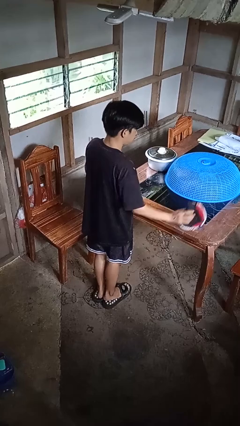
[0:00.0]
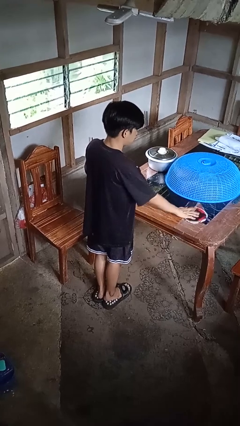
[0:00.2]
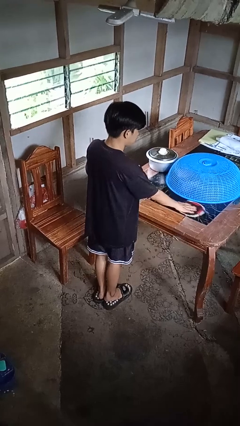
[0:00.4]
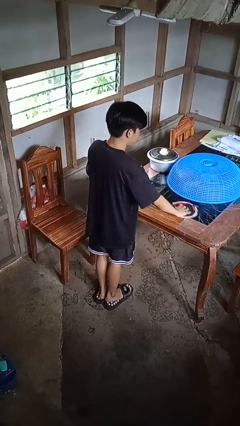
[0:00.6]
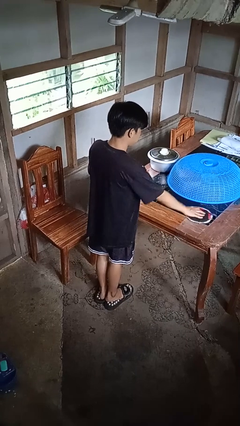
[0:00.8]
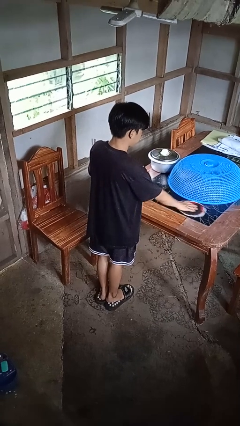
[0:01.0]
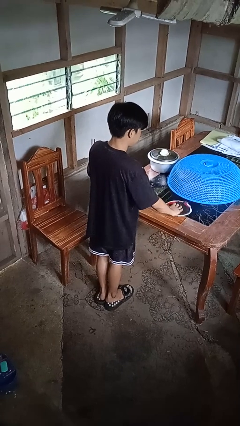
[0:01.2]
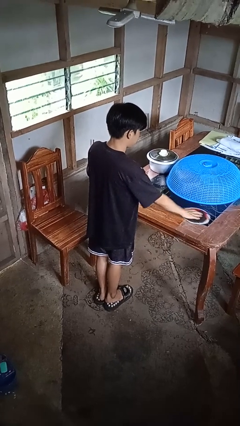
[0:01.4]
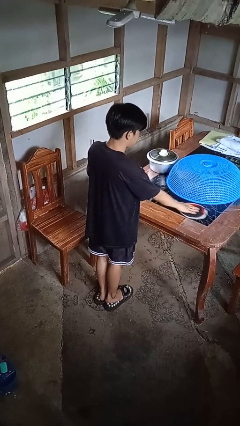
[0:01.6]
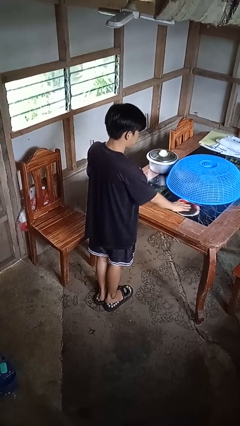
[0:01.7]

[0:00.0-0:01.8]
person cleans table with rag

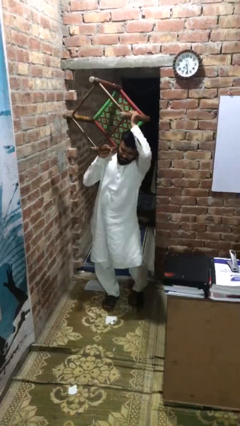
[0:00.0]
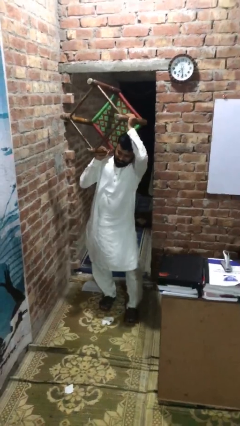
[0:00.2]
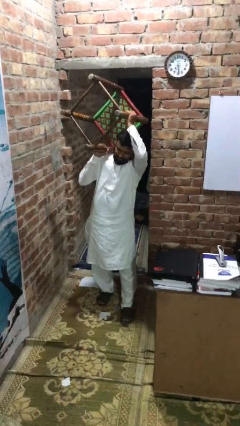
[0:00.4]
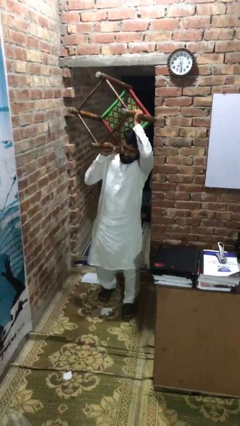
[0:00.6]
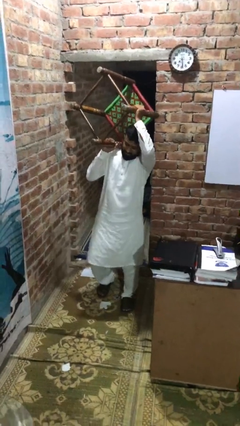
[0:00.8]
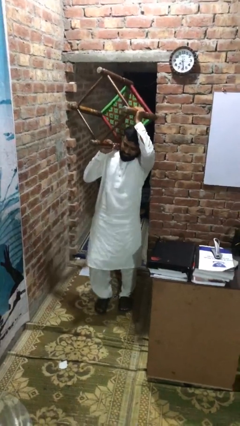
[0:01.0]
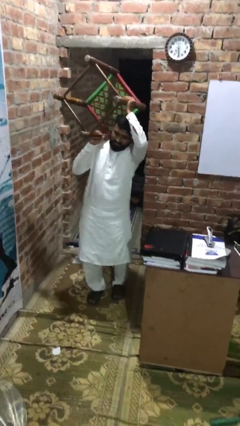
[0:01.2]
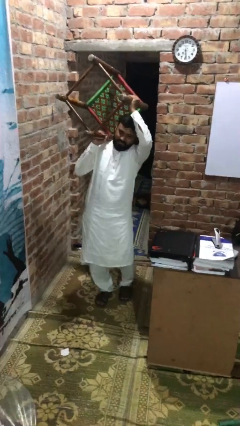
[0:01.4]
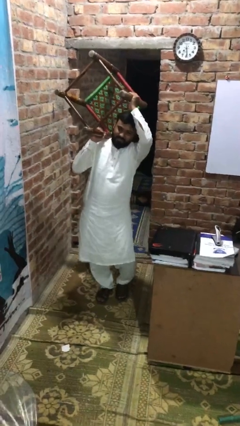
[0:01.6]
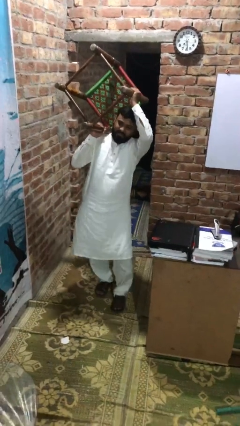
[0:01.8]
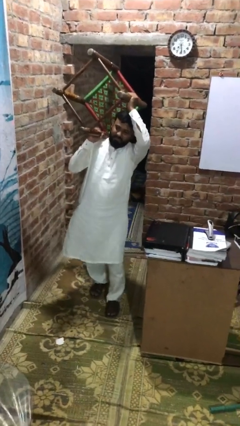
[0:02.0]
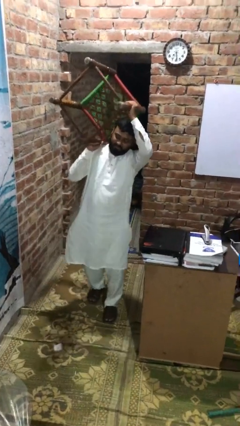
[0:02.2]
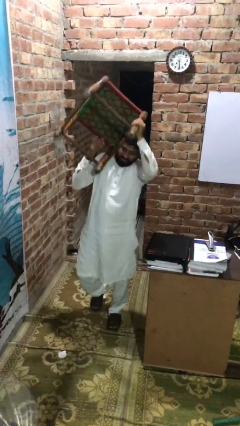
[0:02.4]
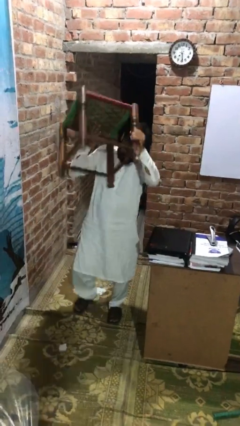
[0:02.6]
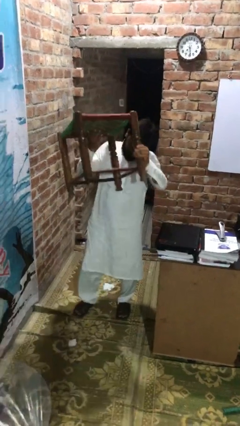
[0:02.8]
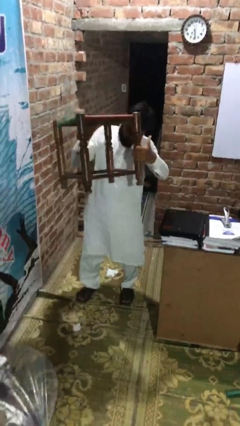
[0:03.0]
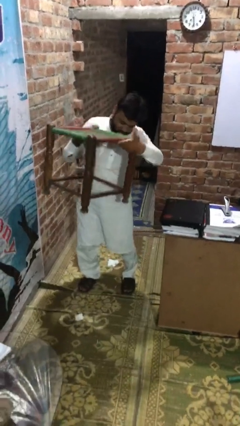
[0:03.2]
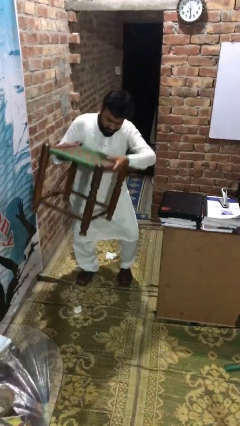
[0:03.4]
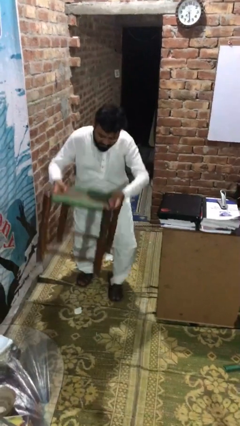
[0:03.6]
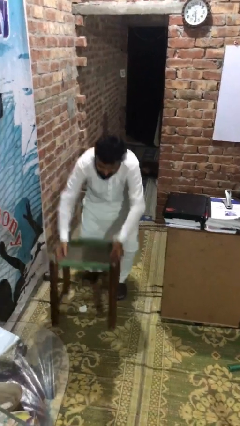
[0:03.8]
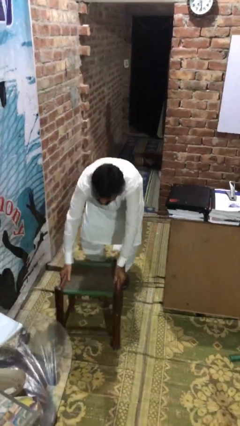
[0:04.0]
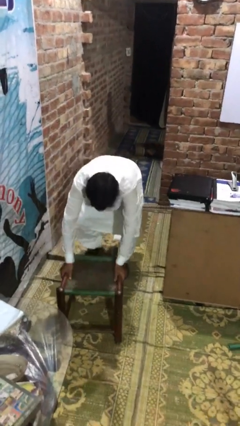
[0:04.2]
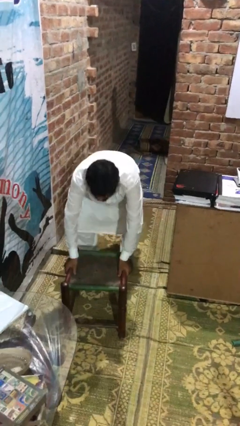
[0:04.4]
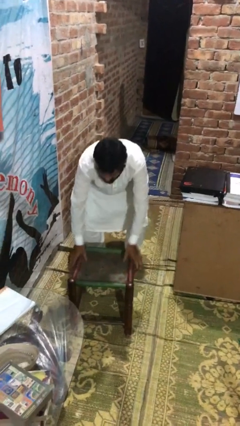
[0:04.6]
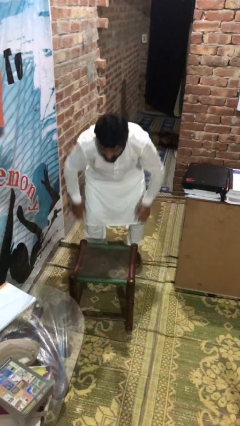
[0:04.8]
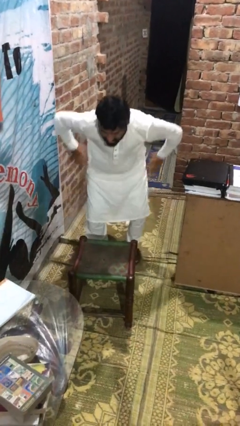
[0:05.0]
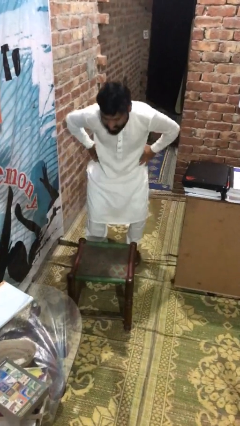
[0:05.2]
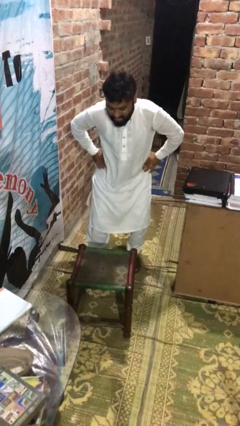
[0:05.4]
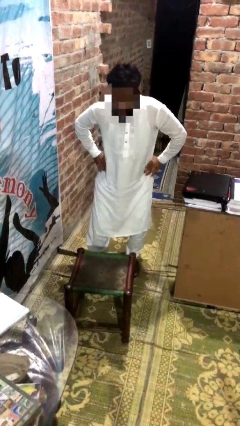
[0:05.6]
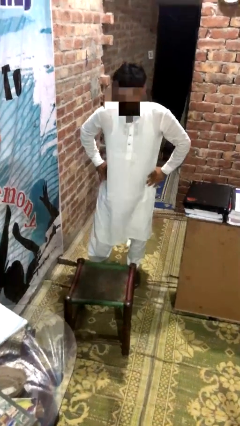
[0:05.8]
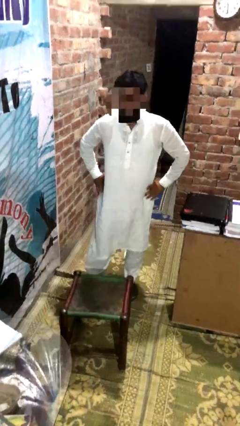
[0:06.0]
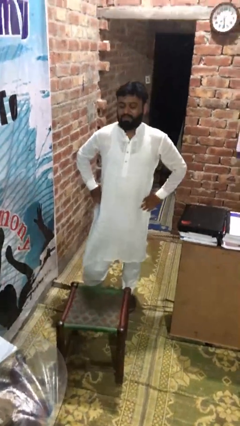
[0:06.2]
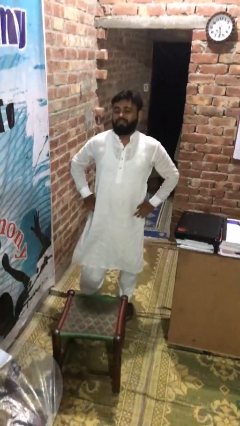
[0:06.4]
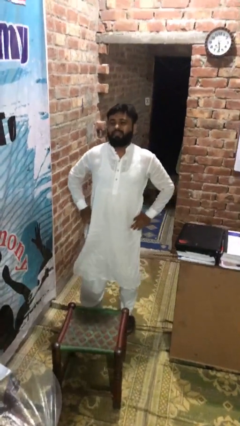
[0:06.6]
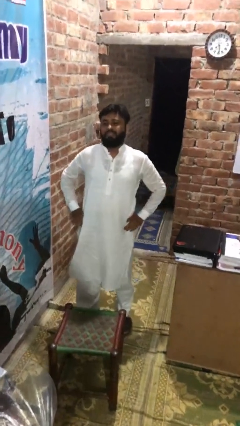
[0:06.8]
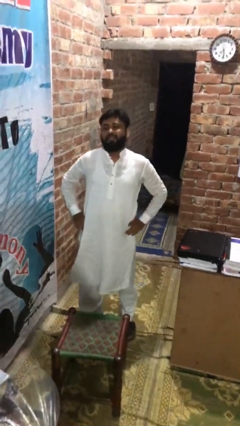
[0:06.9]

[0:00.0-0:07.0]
person puts down object on floor

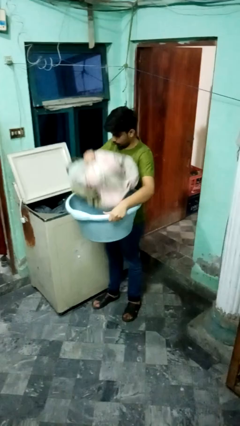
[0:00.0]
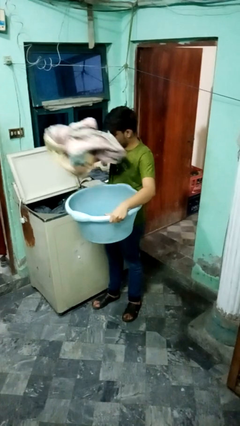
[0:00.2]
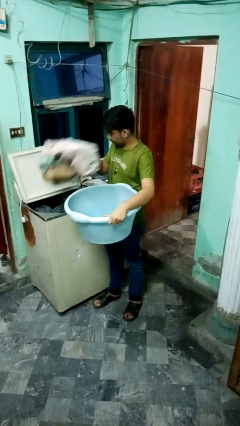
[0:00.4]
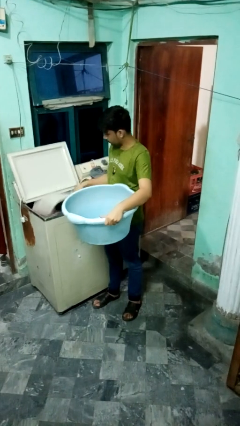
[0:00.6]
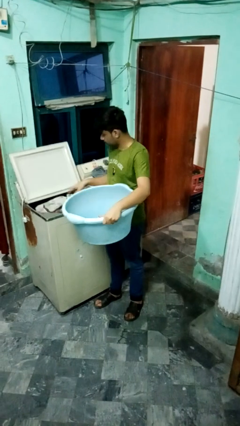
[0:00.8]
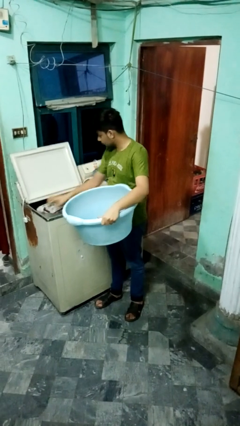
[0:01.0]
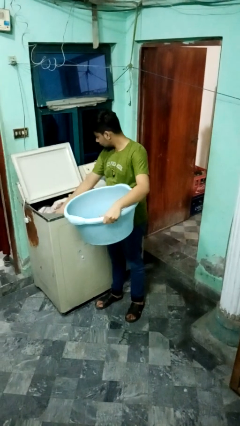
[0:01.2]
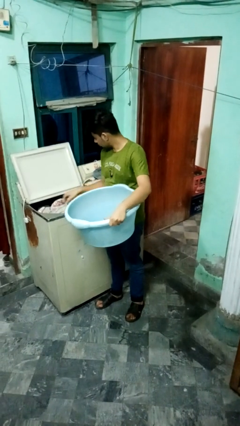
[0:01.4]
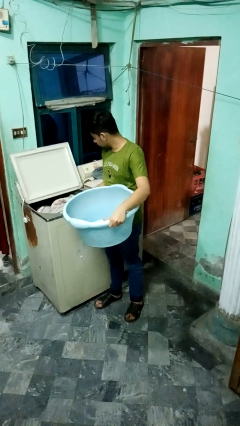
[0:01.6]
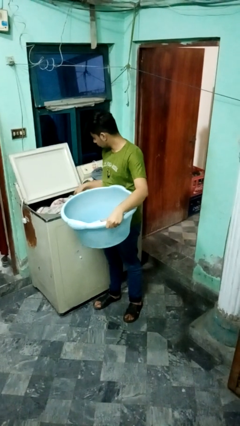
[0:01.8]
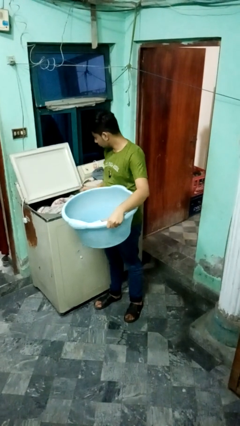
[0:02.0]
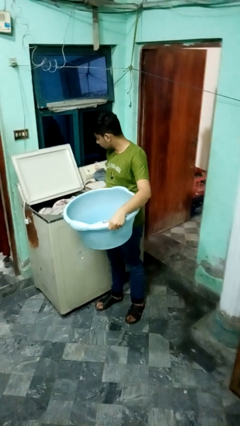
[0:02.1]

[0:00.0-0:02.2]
person loads clotheswasher

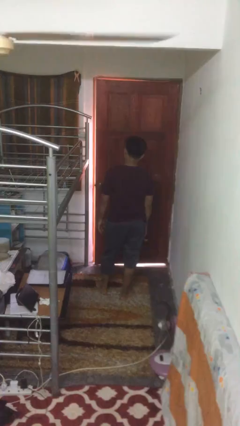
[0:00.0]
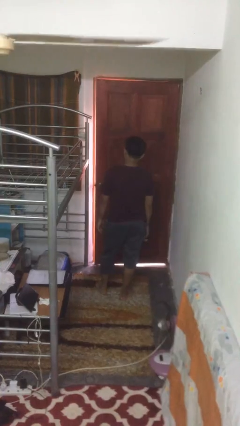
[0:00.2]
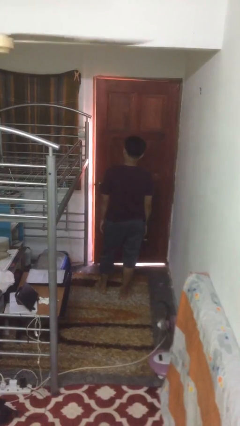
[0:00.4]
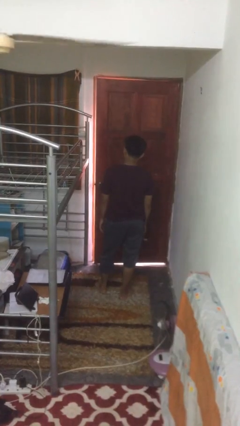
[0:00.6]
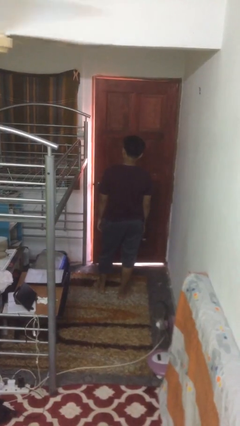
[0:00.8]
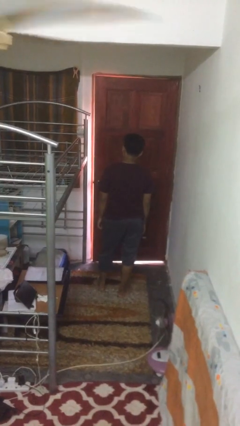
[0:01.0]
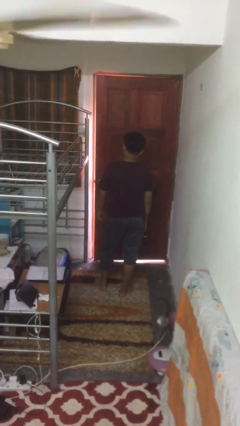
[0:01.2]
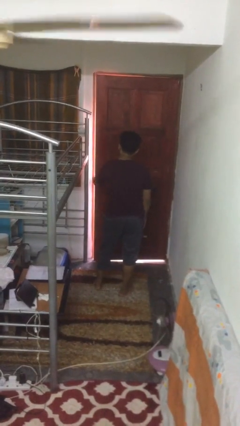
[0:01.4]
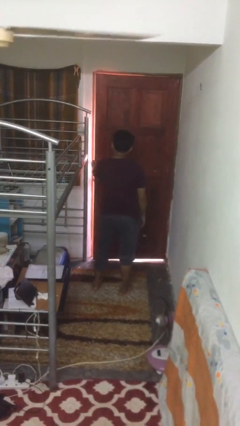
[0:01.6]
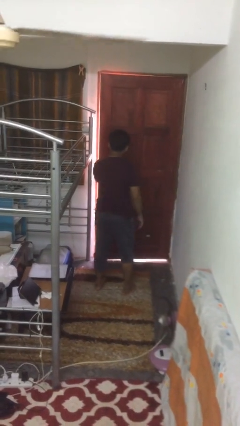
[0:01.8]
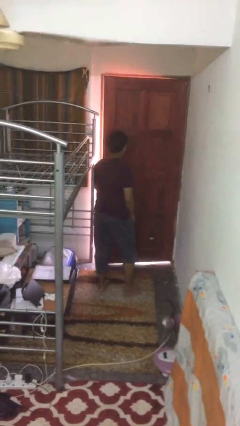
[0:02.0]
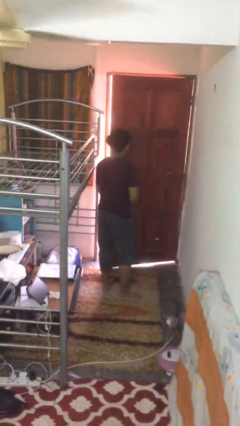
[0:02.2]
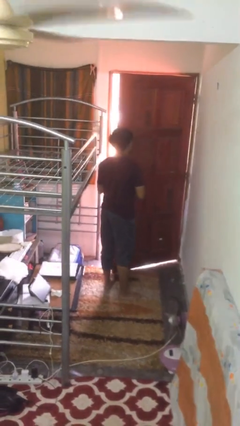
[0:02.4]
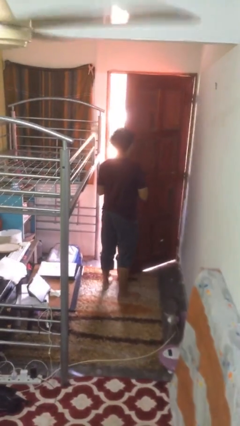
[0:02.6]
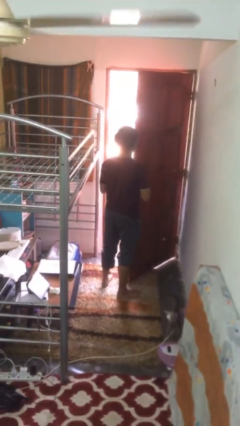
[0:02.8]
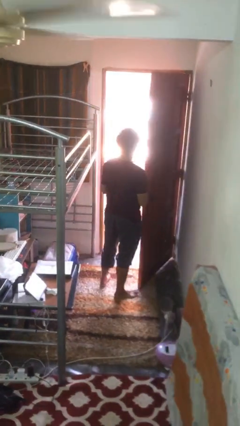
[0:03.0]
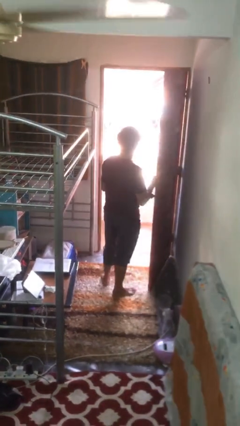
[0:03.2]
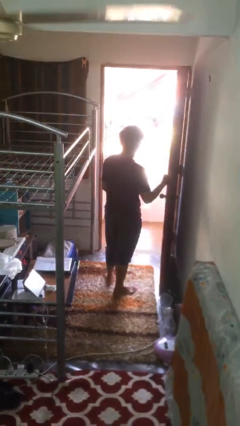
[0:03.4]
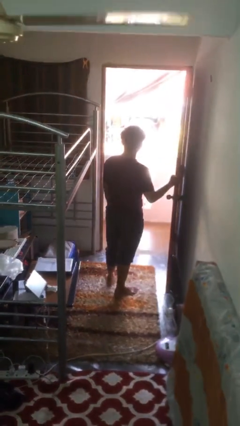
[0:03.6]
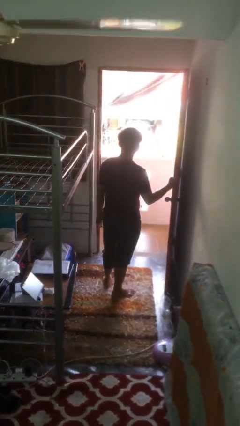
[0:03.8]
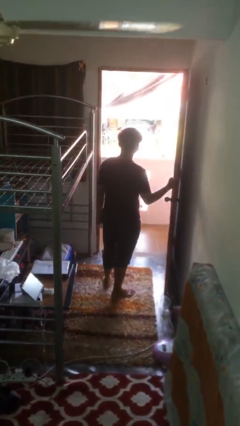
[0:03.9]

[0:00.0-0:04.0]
person opens facility door

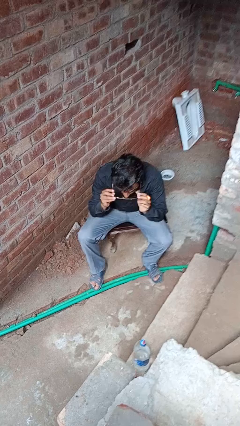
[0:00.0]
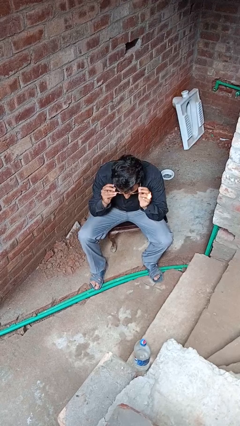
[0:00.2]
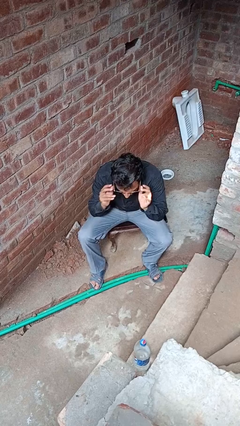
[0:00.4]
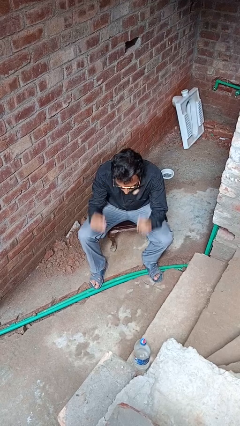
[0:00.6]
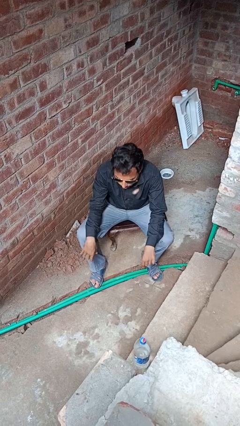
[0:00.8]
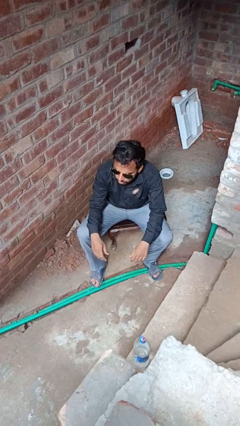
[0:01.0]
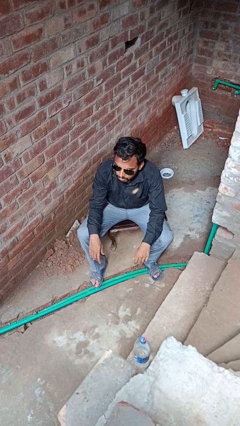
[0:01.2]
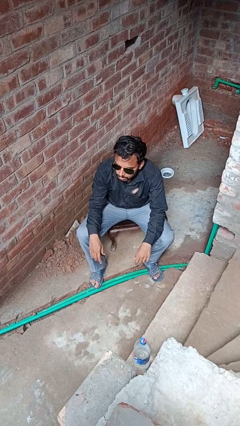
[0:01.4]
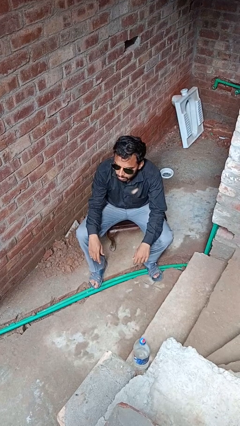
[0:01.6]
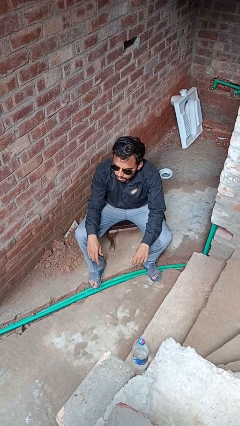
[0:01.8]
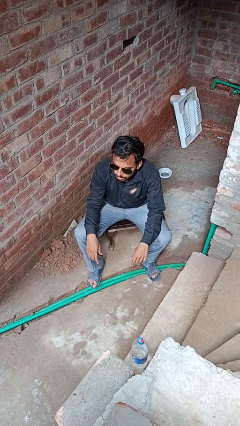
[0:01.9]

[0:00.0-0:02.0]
person puts on glasses
